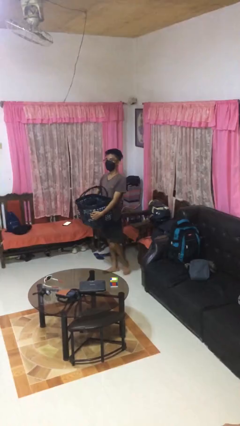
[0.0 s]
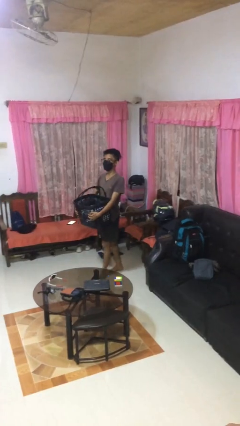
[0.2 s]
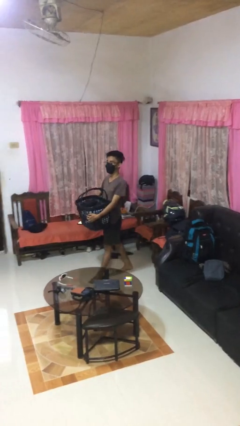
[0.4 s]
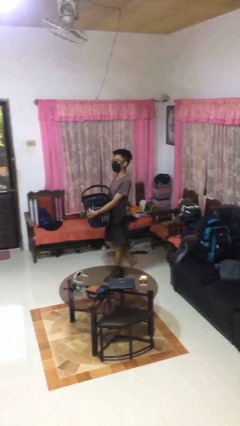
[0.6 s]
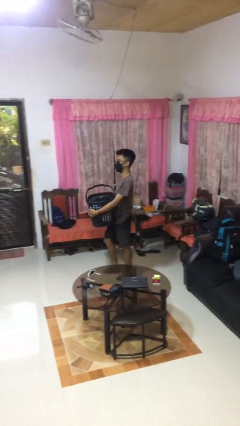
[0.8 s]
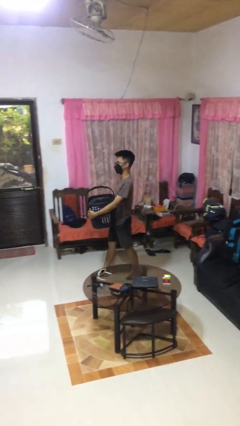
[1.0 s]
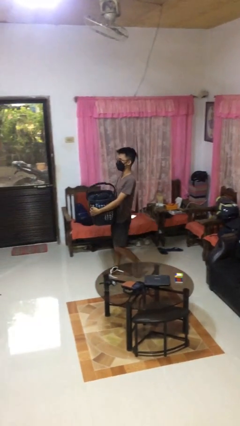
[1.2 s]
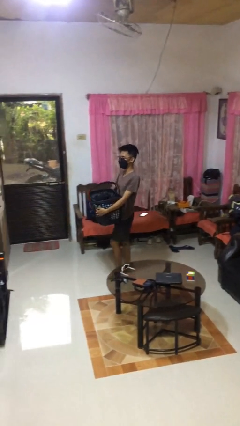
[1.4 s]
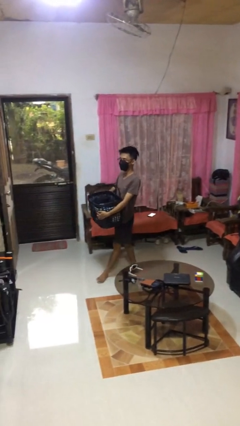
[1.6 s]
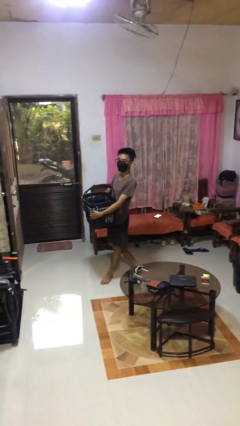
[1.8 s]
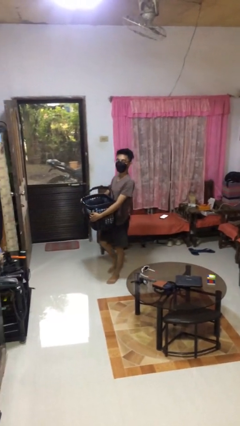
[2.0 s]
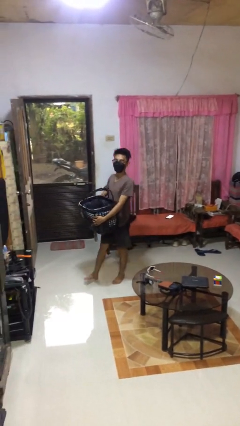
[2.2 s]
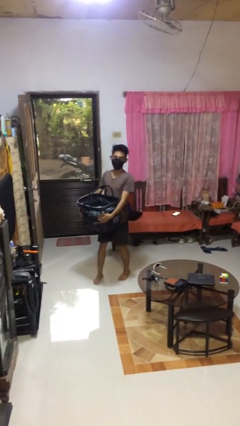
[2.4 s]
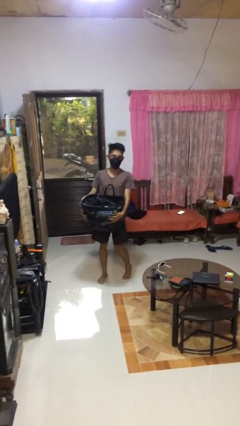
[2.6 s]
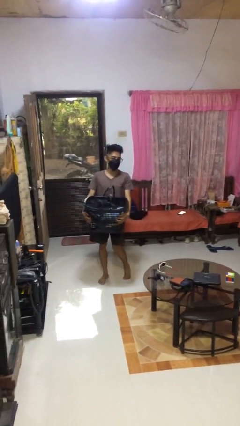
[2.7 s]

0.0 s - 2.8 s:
person carries laundry basket

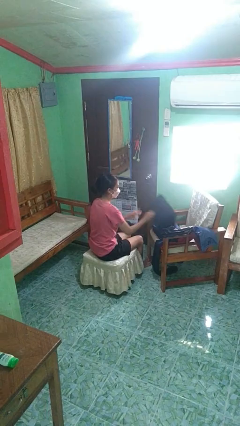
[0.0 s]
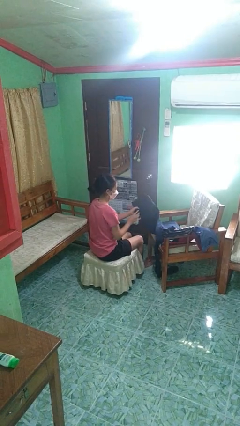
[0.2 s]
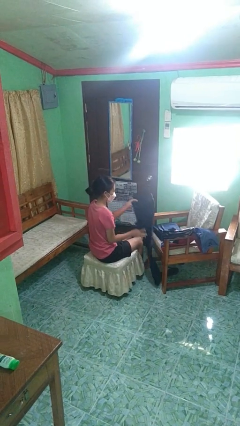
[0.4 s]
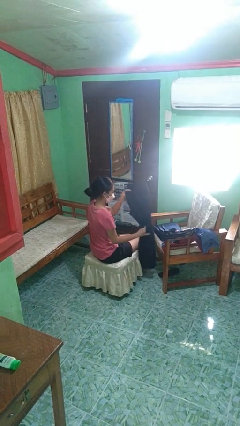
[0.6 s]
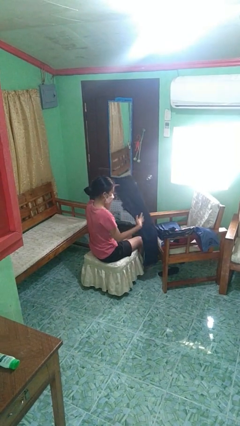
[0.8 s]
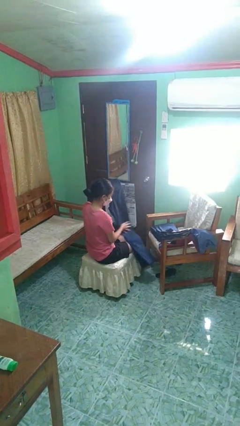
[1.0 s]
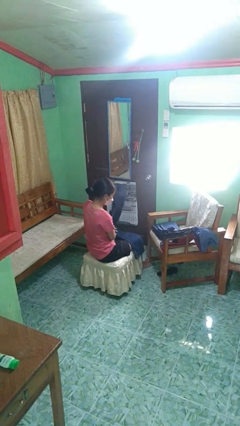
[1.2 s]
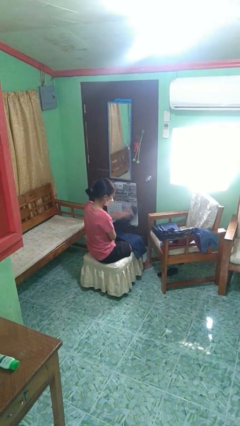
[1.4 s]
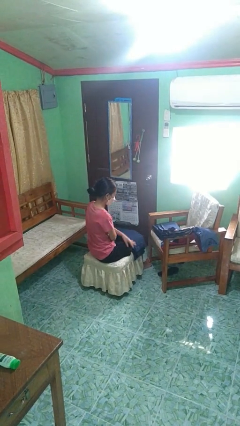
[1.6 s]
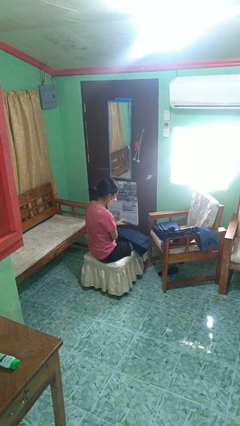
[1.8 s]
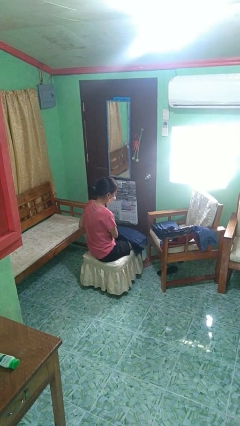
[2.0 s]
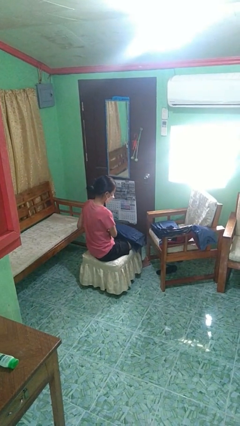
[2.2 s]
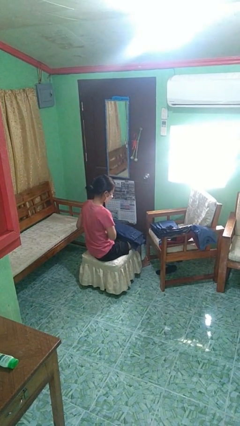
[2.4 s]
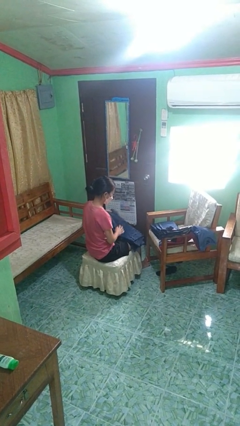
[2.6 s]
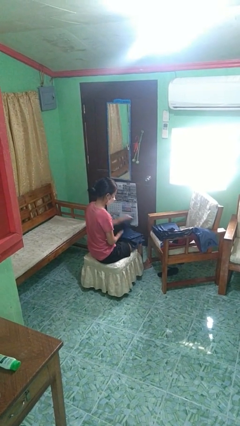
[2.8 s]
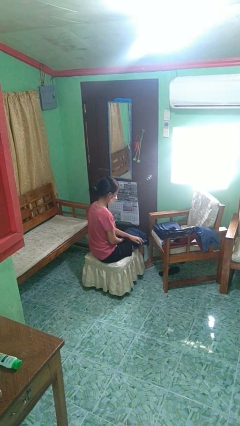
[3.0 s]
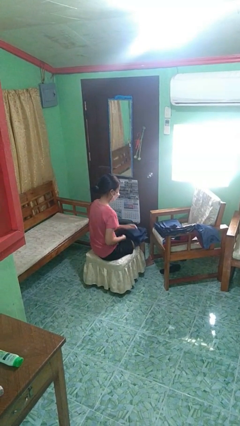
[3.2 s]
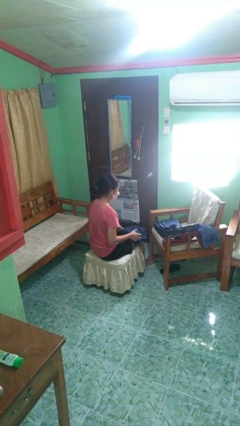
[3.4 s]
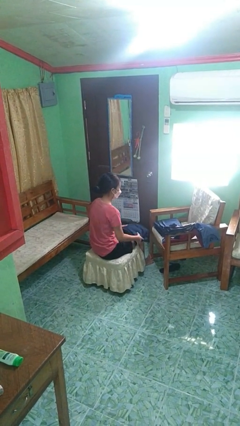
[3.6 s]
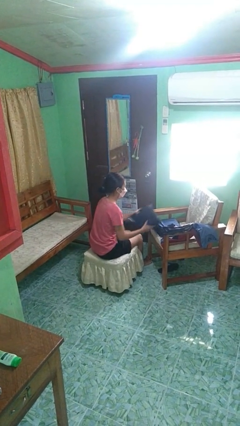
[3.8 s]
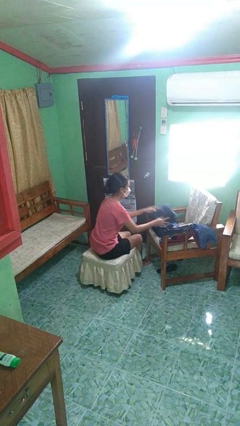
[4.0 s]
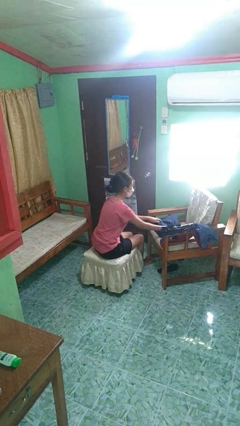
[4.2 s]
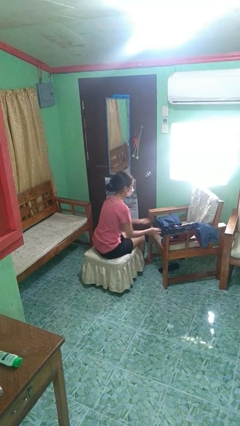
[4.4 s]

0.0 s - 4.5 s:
person folds pants

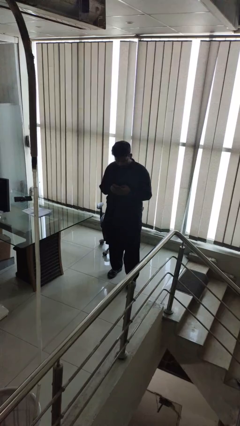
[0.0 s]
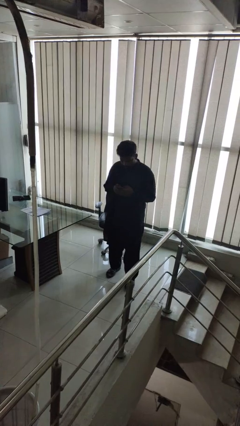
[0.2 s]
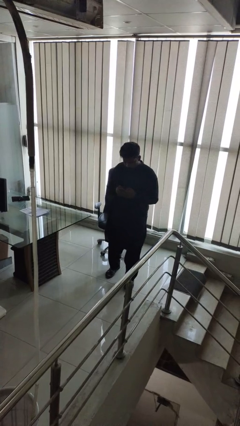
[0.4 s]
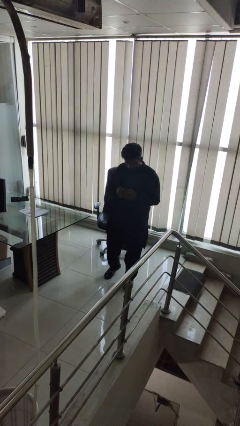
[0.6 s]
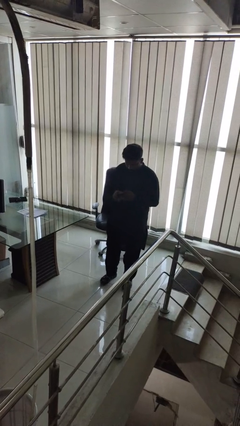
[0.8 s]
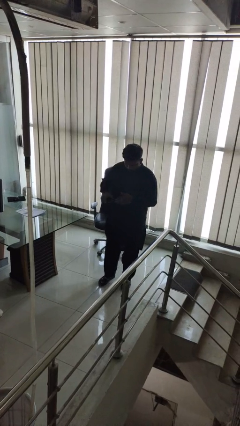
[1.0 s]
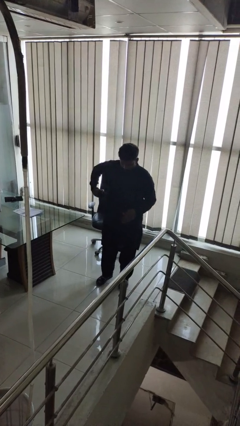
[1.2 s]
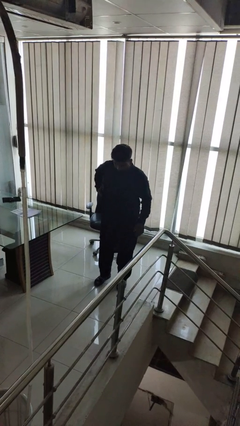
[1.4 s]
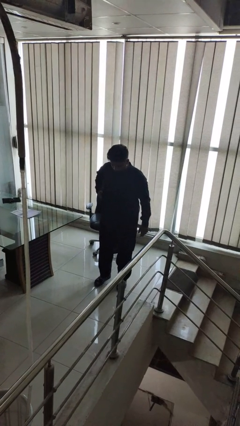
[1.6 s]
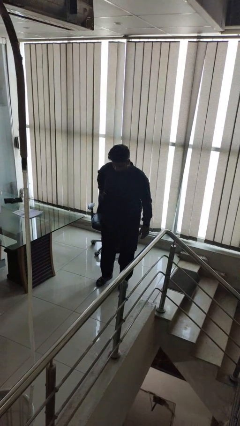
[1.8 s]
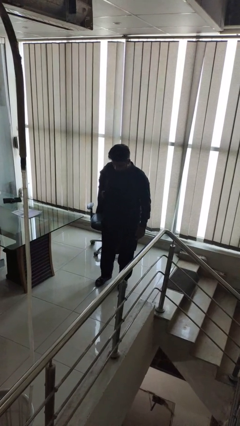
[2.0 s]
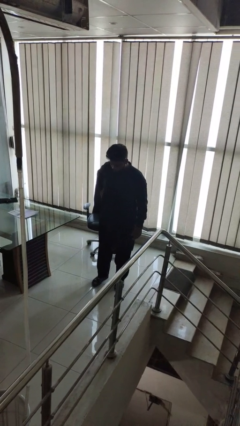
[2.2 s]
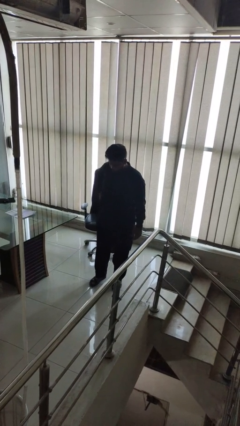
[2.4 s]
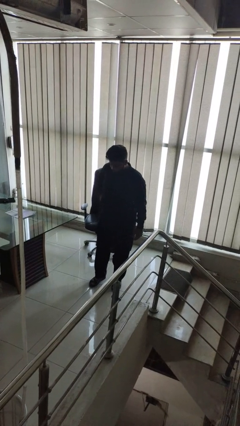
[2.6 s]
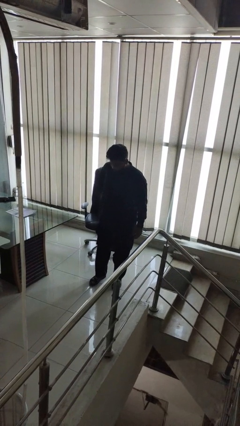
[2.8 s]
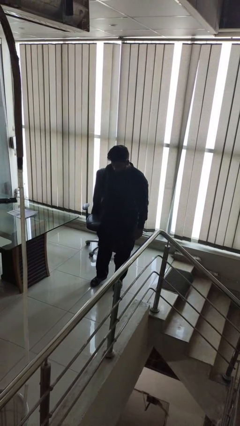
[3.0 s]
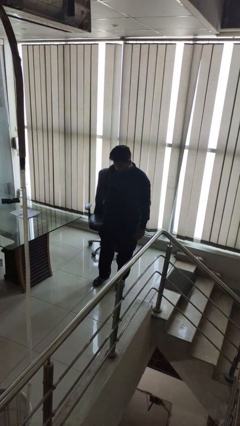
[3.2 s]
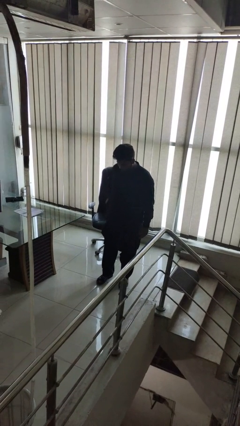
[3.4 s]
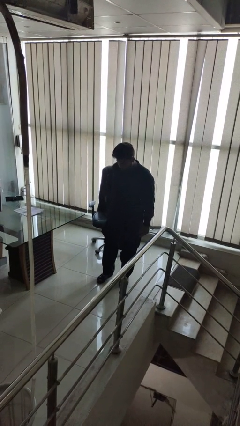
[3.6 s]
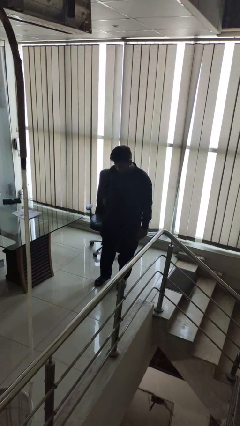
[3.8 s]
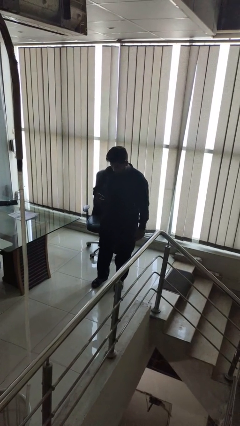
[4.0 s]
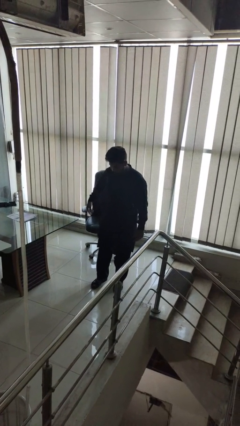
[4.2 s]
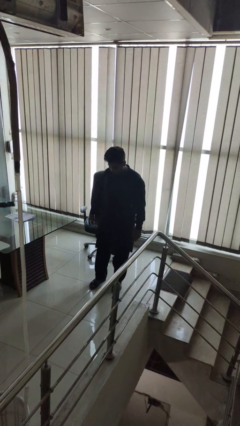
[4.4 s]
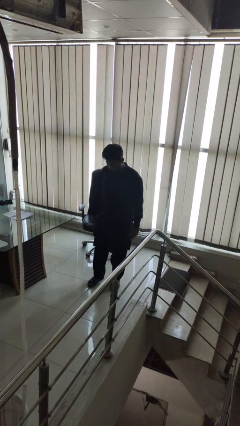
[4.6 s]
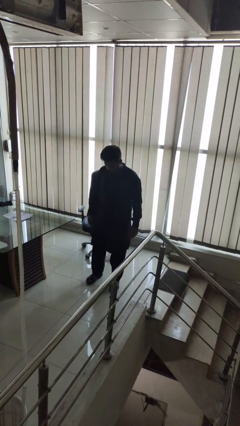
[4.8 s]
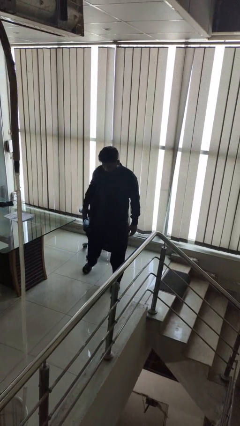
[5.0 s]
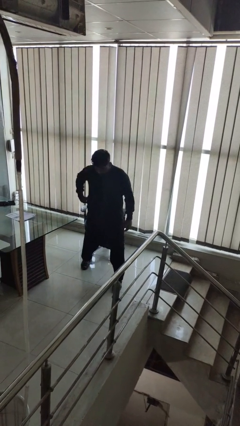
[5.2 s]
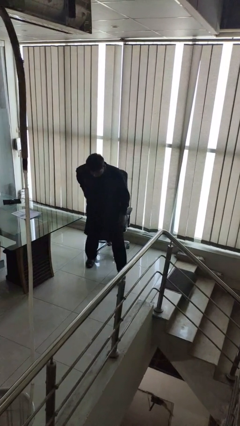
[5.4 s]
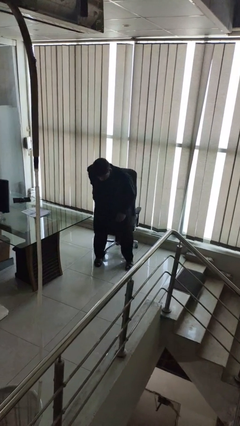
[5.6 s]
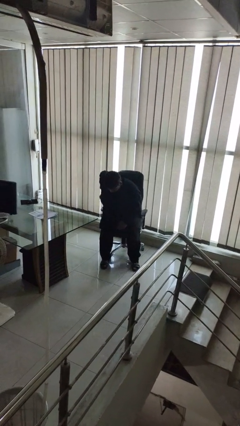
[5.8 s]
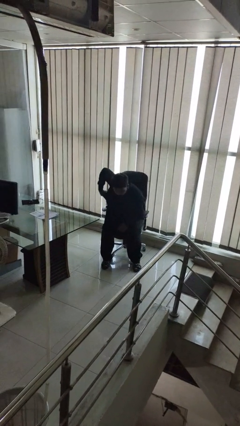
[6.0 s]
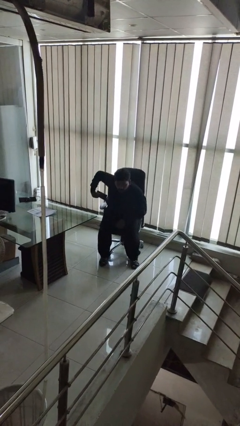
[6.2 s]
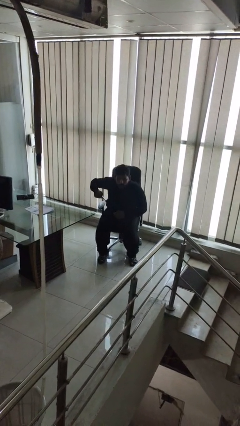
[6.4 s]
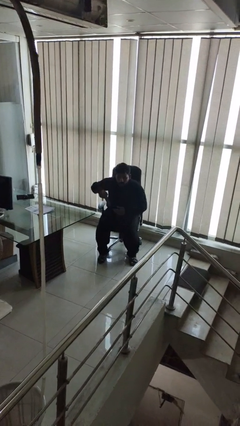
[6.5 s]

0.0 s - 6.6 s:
person puts phone into pocket

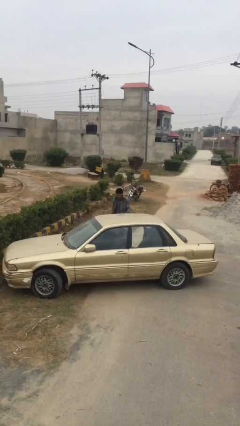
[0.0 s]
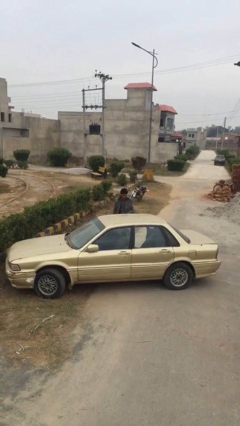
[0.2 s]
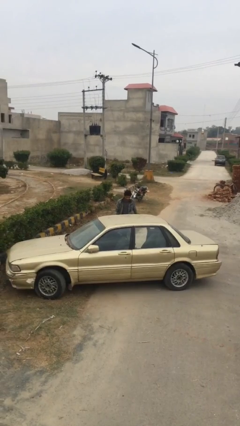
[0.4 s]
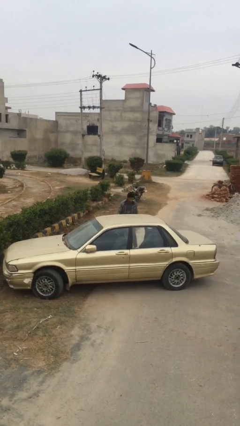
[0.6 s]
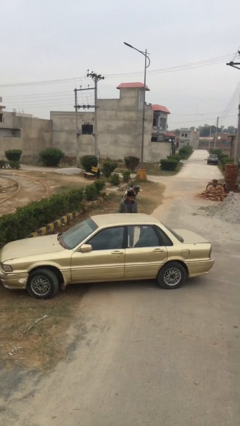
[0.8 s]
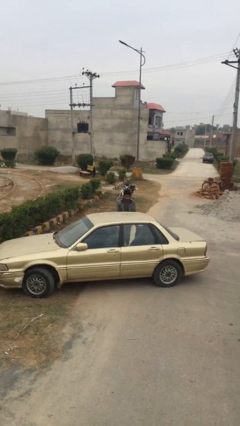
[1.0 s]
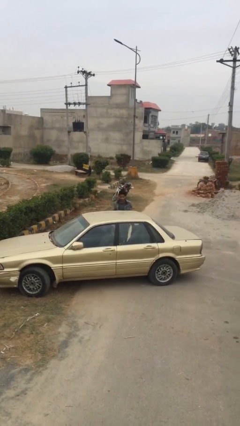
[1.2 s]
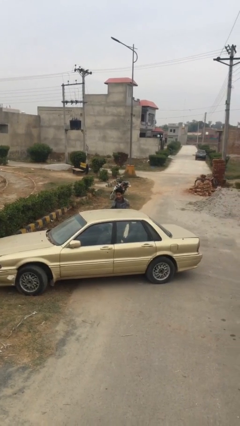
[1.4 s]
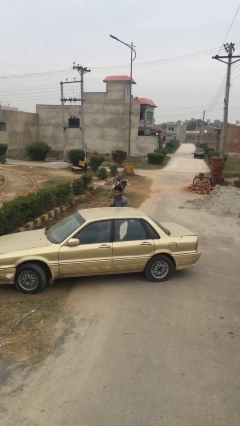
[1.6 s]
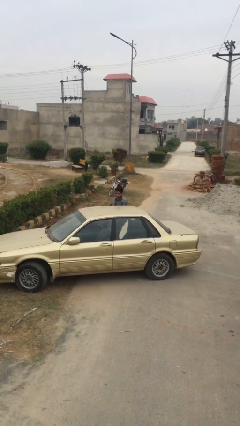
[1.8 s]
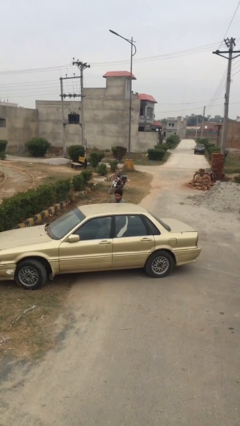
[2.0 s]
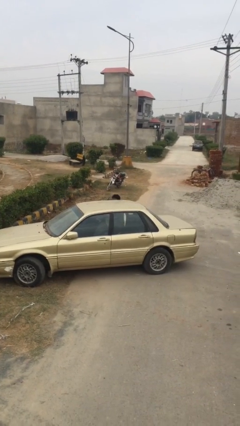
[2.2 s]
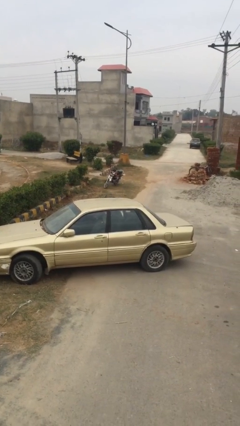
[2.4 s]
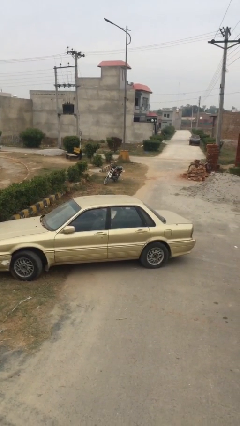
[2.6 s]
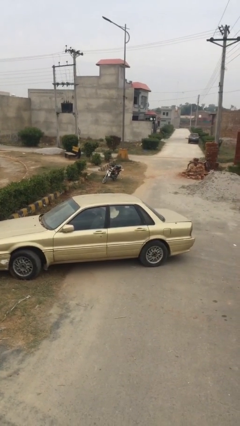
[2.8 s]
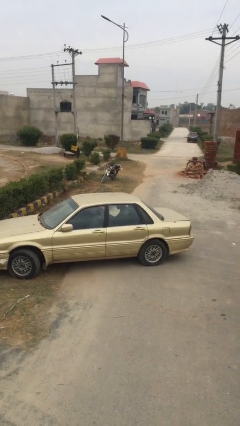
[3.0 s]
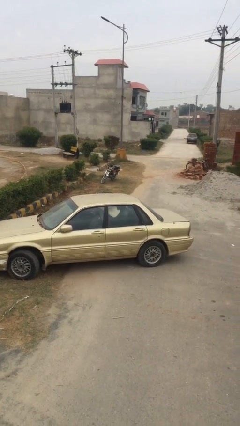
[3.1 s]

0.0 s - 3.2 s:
person enters car

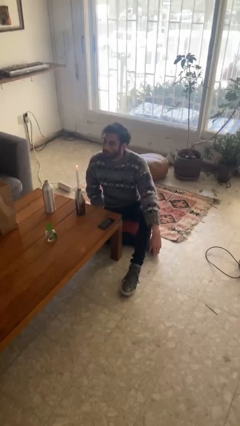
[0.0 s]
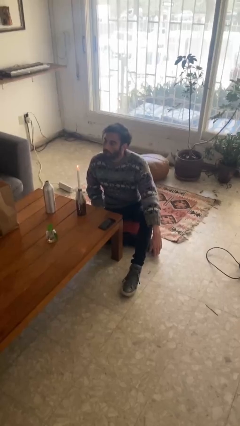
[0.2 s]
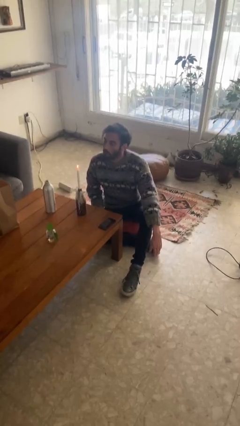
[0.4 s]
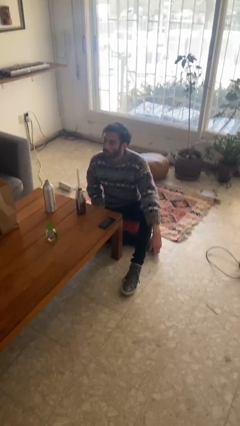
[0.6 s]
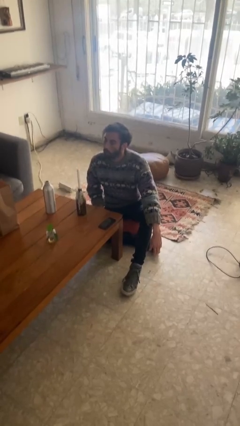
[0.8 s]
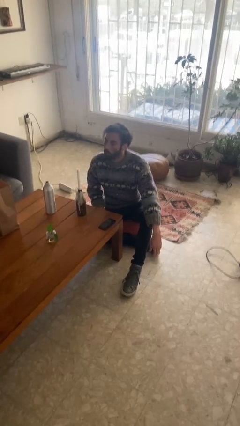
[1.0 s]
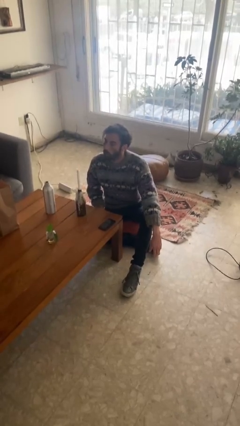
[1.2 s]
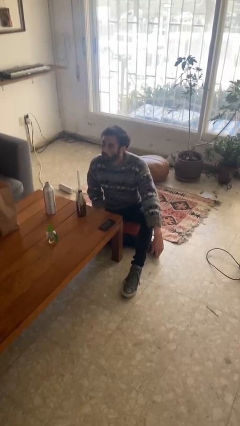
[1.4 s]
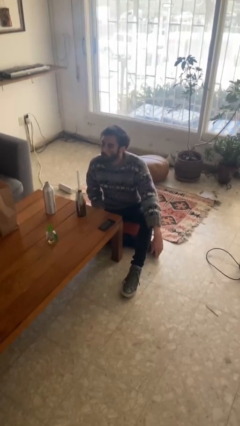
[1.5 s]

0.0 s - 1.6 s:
person extinguishes candle
